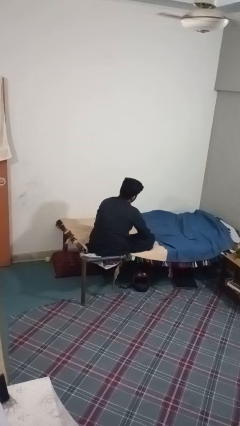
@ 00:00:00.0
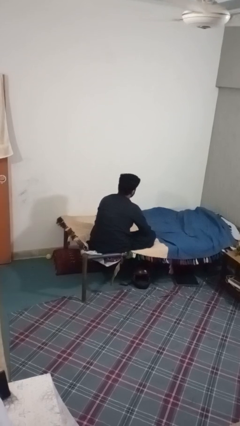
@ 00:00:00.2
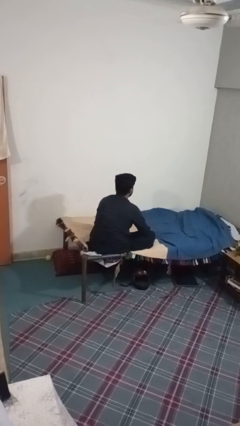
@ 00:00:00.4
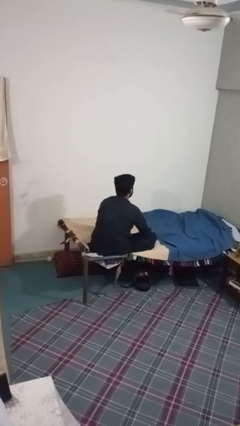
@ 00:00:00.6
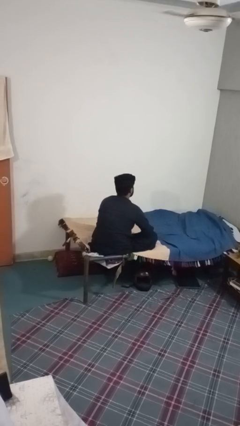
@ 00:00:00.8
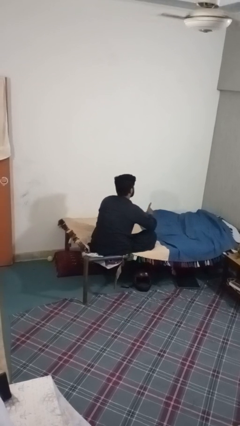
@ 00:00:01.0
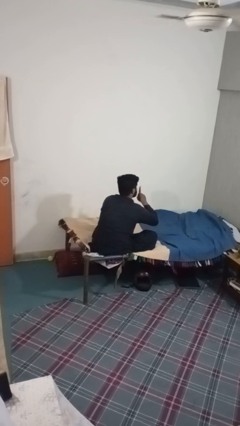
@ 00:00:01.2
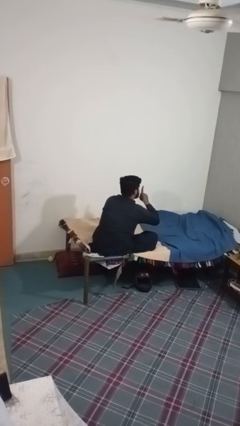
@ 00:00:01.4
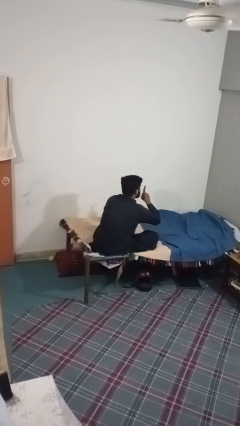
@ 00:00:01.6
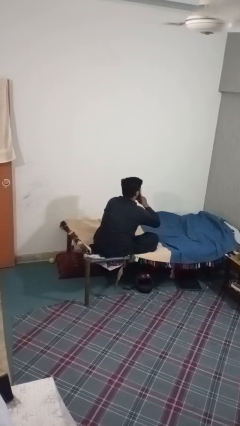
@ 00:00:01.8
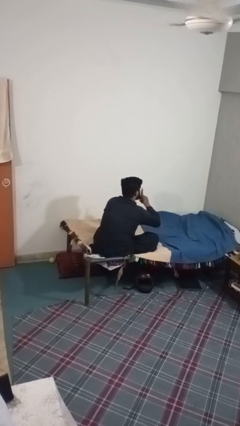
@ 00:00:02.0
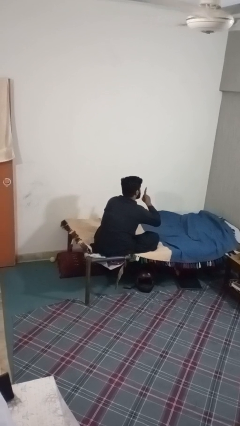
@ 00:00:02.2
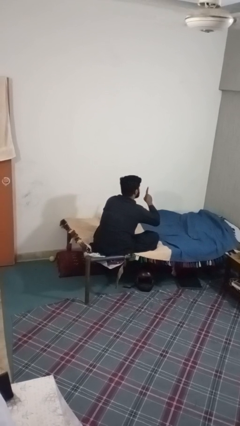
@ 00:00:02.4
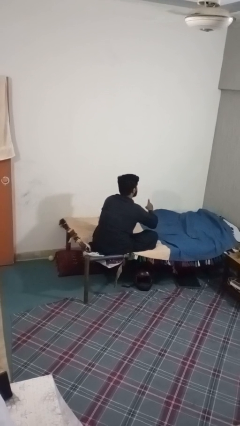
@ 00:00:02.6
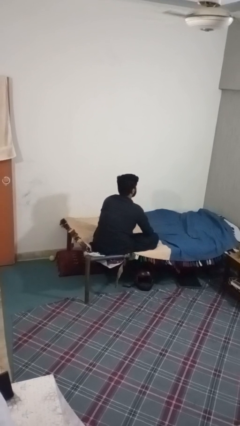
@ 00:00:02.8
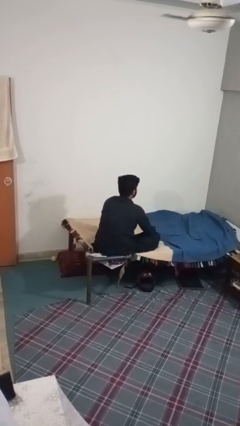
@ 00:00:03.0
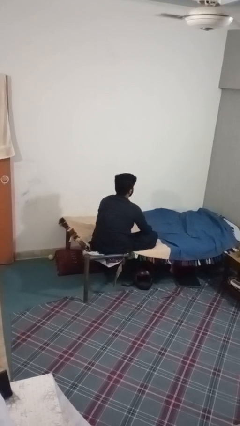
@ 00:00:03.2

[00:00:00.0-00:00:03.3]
person gestures be quiet

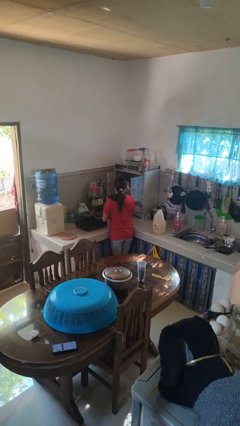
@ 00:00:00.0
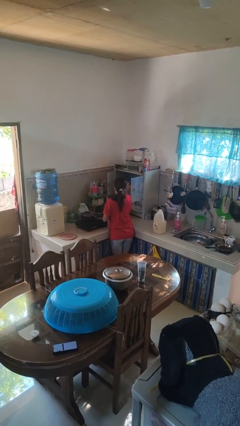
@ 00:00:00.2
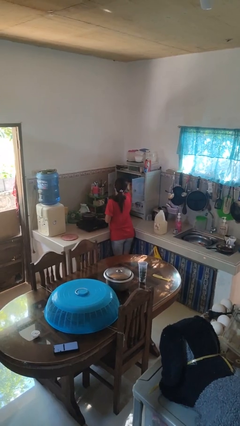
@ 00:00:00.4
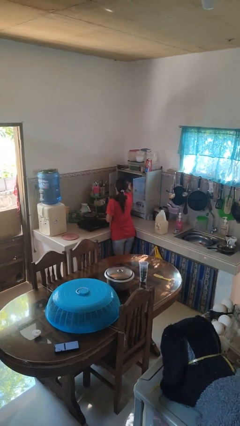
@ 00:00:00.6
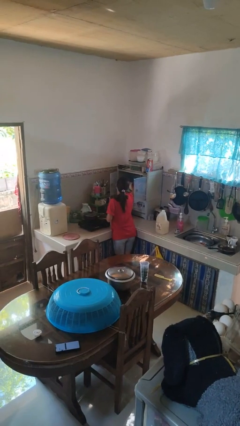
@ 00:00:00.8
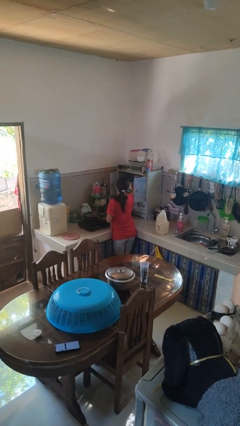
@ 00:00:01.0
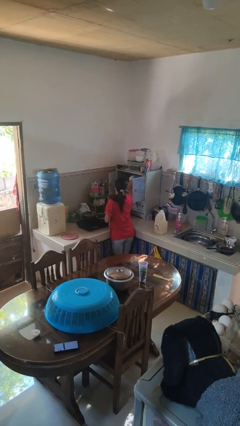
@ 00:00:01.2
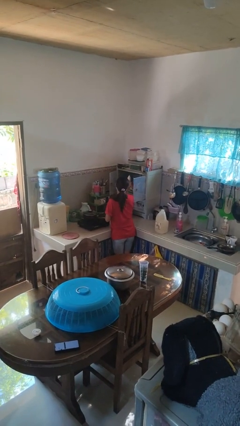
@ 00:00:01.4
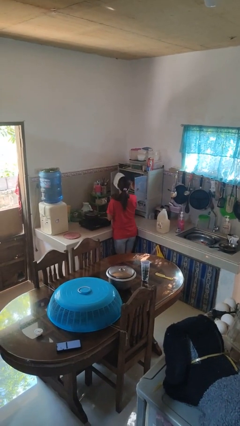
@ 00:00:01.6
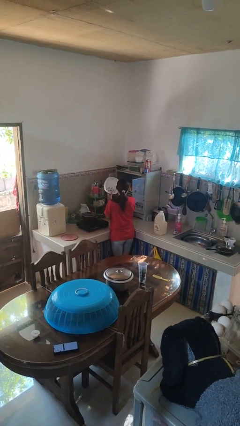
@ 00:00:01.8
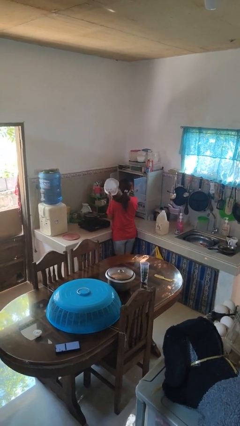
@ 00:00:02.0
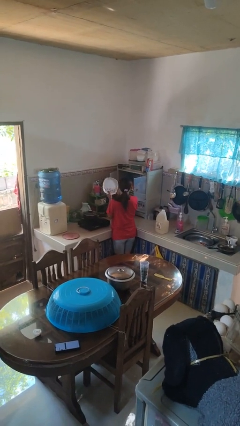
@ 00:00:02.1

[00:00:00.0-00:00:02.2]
person takes object from cabinet

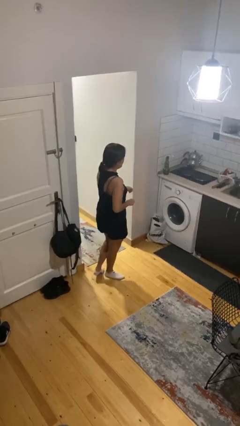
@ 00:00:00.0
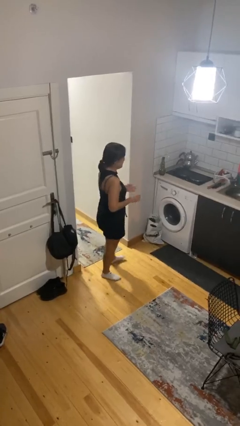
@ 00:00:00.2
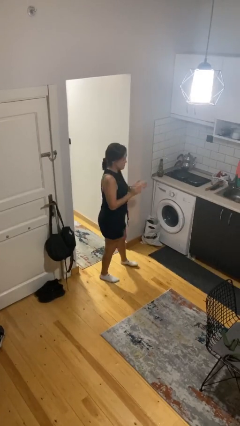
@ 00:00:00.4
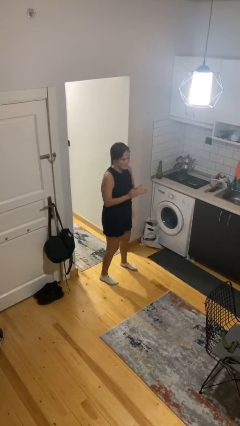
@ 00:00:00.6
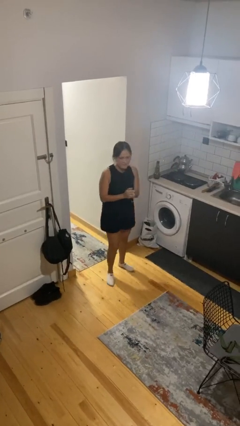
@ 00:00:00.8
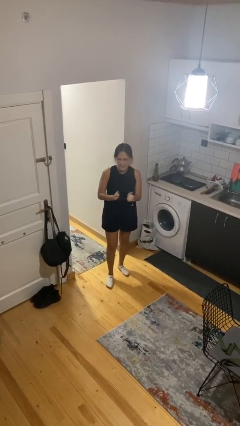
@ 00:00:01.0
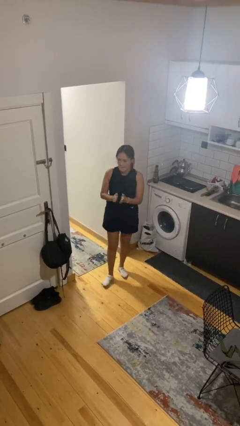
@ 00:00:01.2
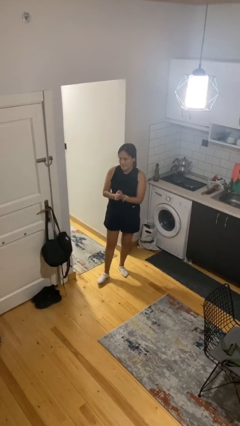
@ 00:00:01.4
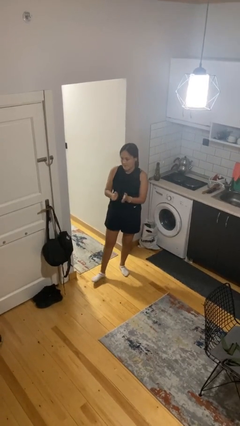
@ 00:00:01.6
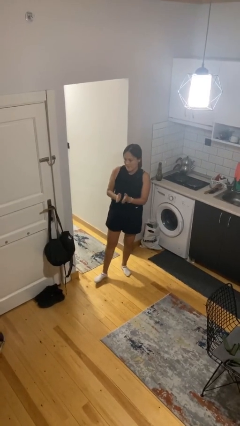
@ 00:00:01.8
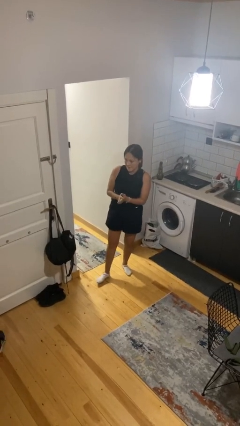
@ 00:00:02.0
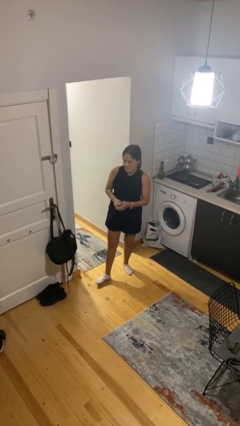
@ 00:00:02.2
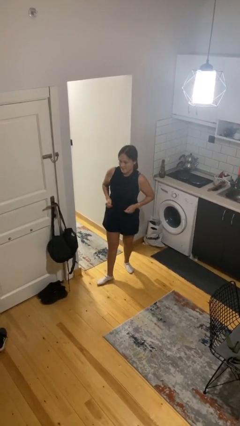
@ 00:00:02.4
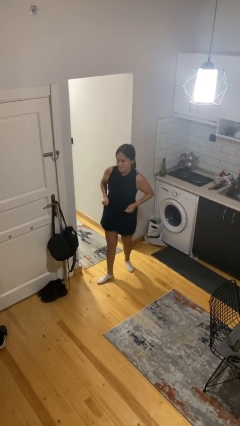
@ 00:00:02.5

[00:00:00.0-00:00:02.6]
person claps hands

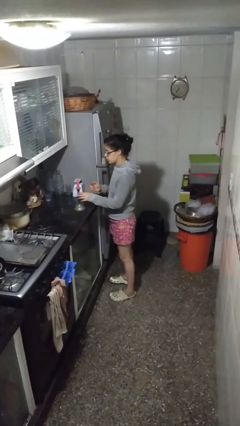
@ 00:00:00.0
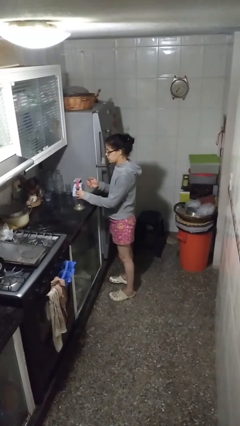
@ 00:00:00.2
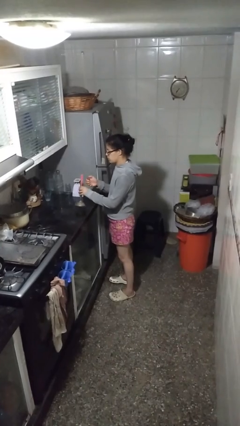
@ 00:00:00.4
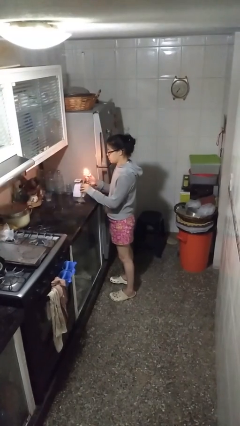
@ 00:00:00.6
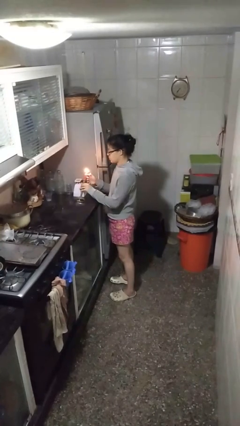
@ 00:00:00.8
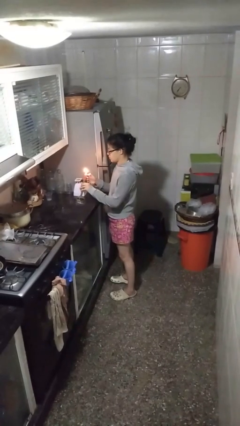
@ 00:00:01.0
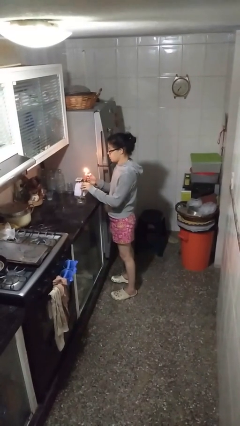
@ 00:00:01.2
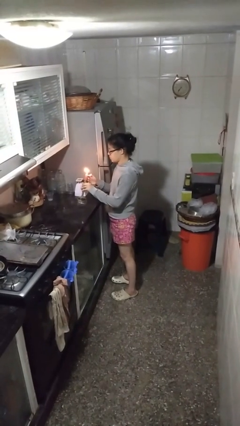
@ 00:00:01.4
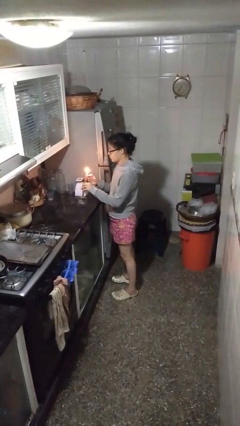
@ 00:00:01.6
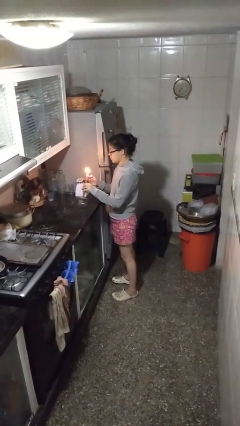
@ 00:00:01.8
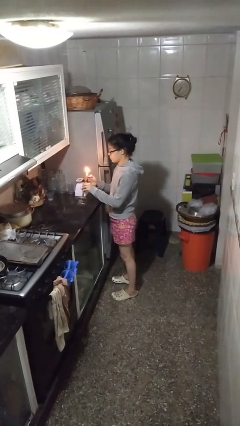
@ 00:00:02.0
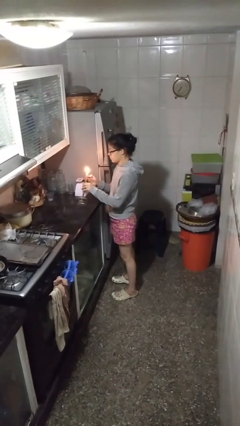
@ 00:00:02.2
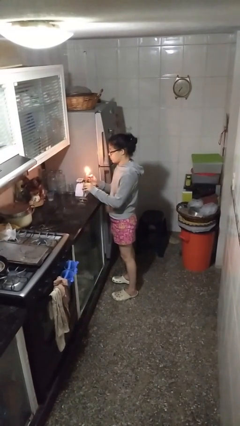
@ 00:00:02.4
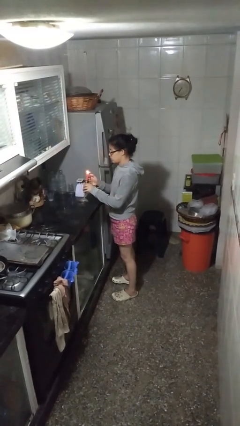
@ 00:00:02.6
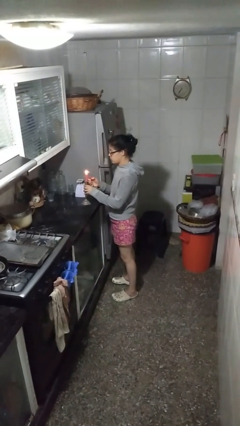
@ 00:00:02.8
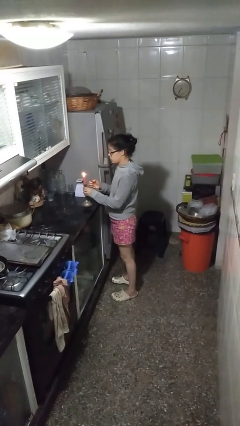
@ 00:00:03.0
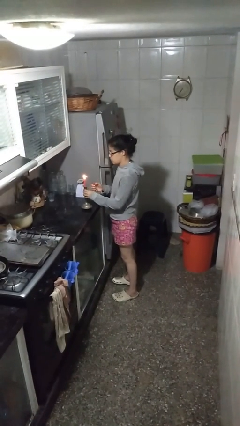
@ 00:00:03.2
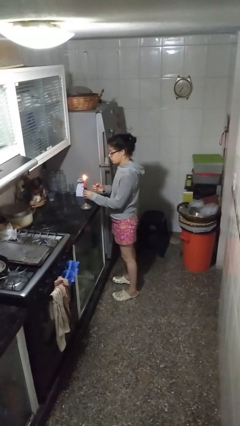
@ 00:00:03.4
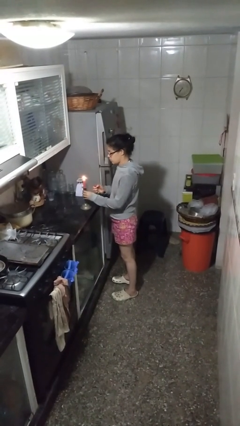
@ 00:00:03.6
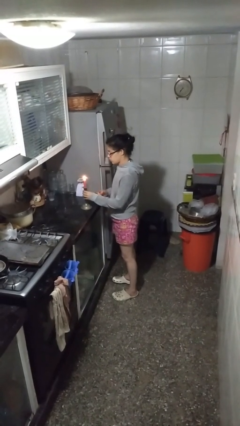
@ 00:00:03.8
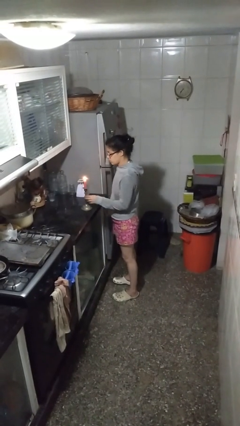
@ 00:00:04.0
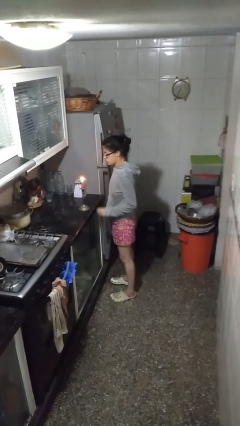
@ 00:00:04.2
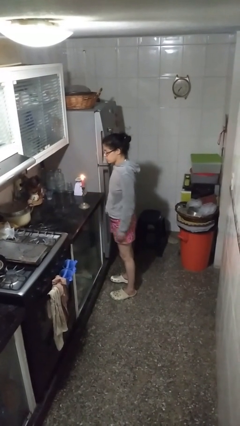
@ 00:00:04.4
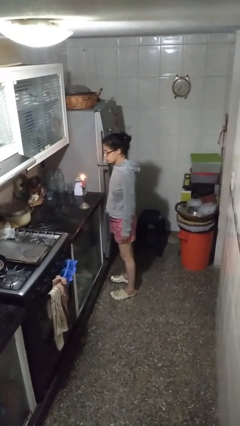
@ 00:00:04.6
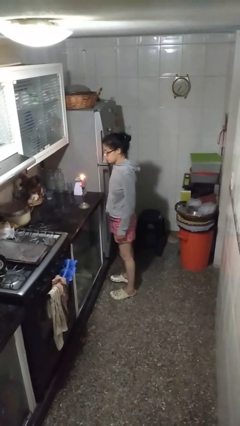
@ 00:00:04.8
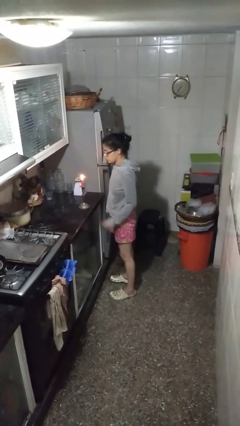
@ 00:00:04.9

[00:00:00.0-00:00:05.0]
person lights candle

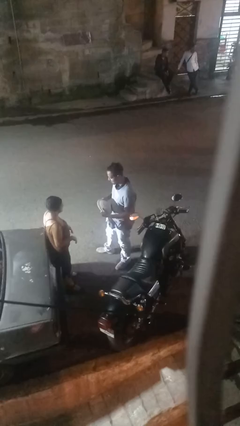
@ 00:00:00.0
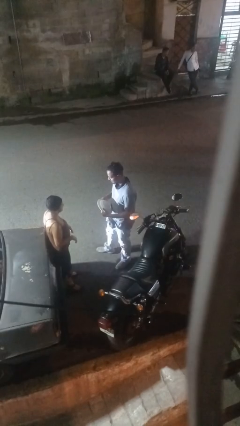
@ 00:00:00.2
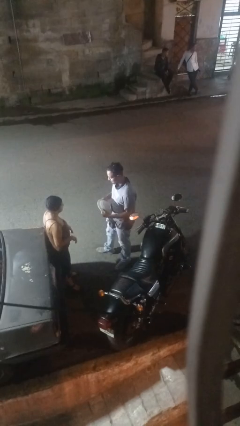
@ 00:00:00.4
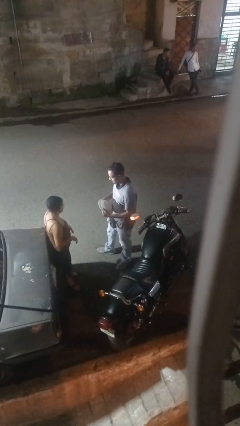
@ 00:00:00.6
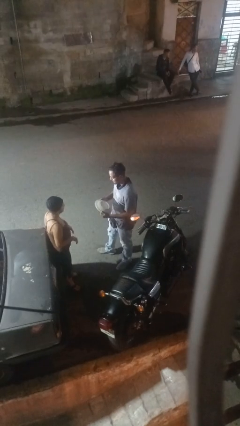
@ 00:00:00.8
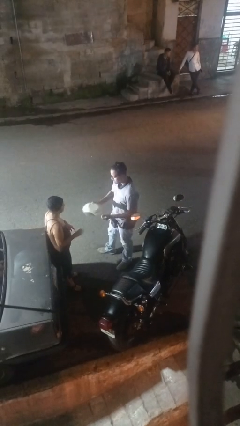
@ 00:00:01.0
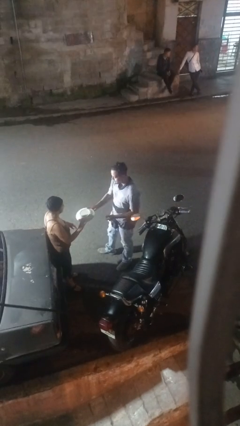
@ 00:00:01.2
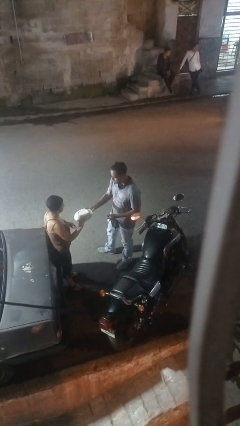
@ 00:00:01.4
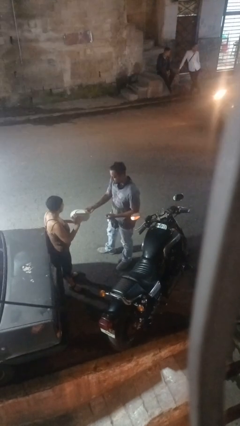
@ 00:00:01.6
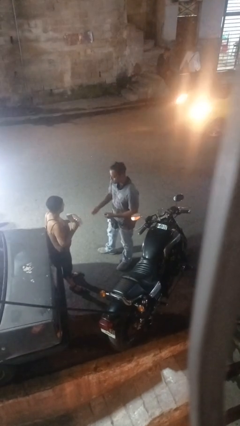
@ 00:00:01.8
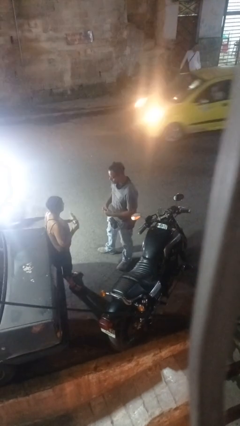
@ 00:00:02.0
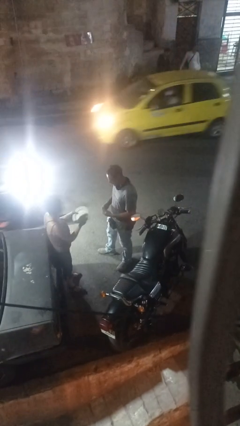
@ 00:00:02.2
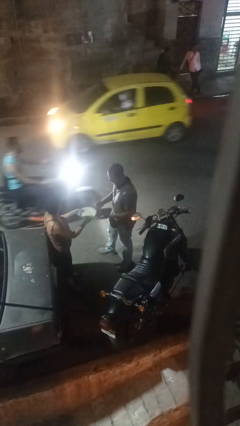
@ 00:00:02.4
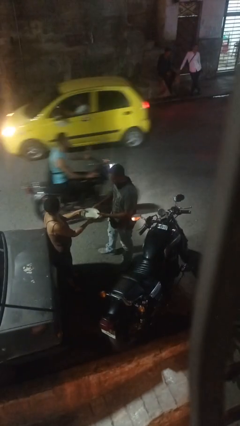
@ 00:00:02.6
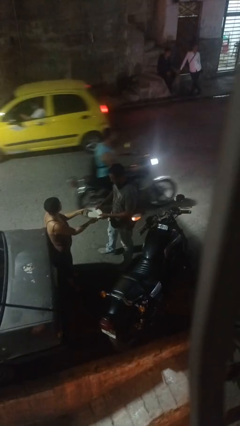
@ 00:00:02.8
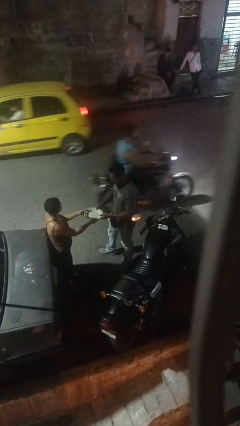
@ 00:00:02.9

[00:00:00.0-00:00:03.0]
person transfers object to person

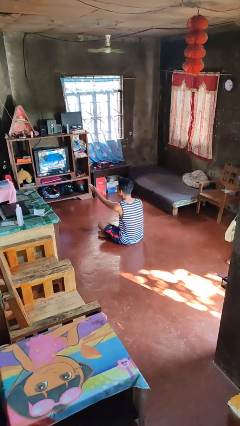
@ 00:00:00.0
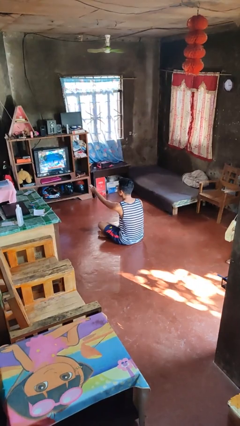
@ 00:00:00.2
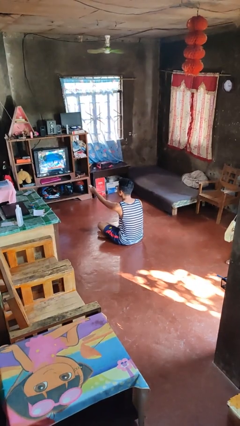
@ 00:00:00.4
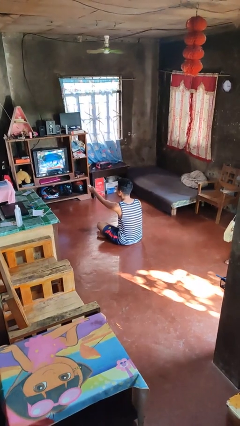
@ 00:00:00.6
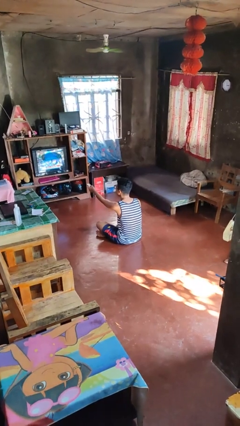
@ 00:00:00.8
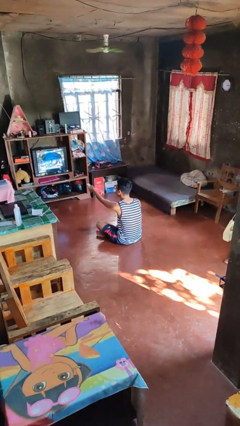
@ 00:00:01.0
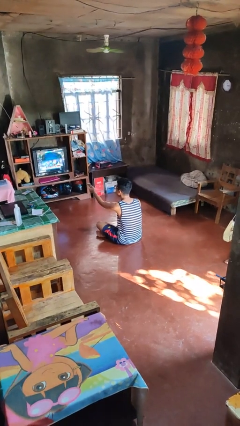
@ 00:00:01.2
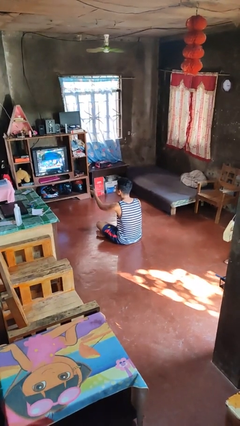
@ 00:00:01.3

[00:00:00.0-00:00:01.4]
person uses television remote
